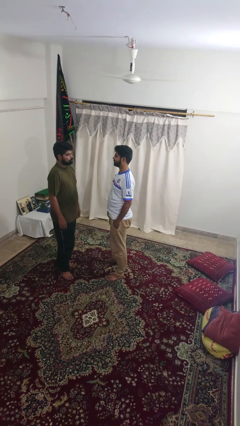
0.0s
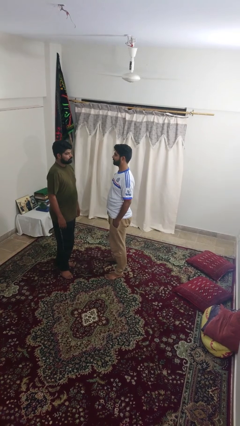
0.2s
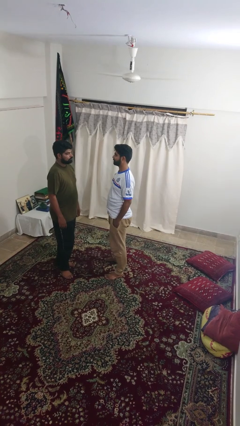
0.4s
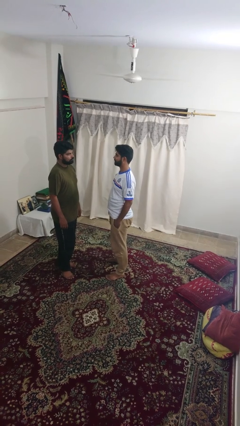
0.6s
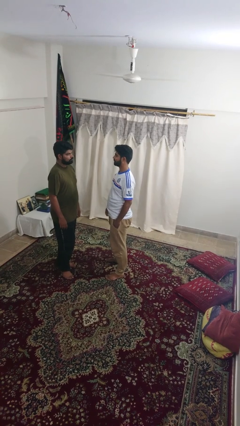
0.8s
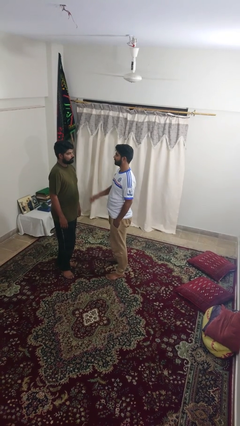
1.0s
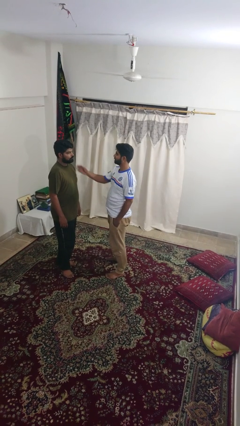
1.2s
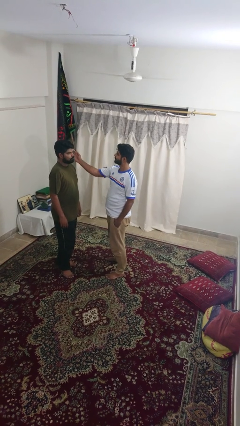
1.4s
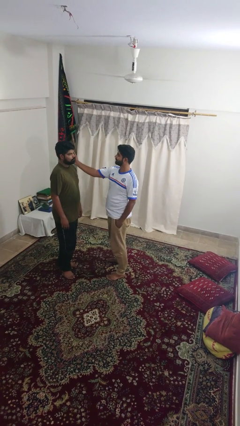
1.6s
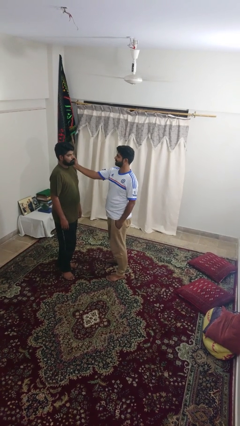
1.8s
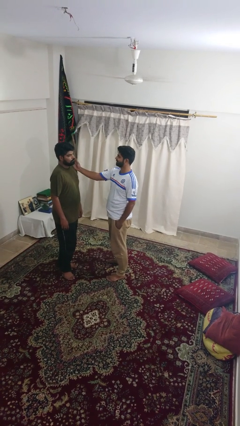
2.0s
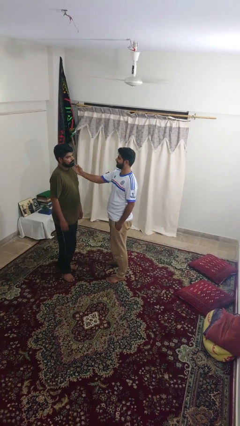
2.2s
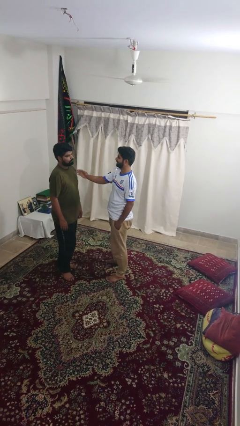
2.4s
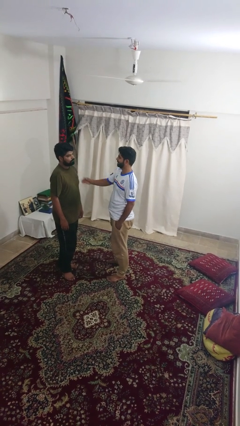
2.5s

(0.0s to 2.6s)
person touches face of person

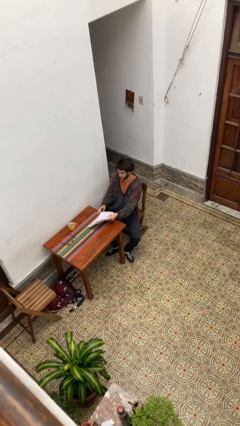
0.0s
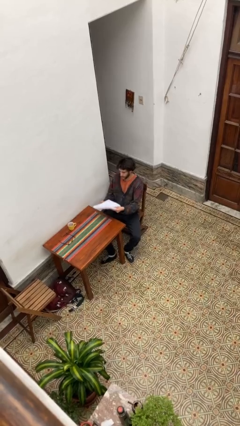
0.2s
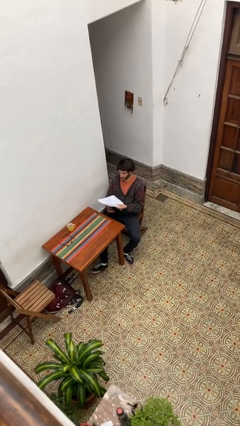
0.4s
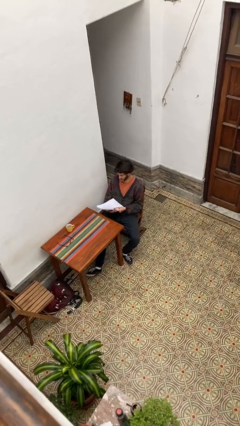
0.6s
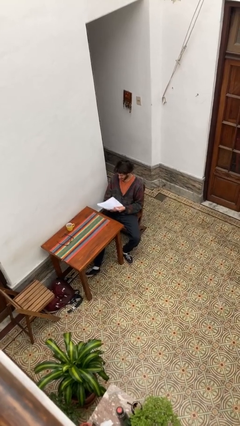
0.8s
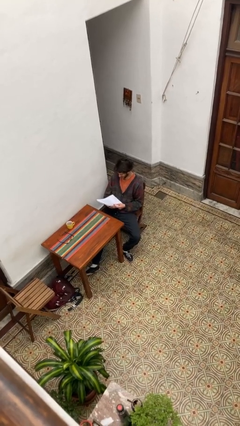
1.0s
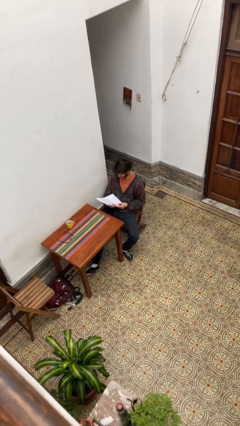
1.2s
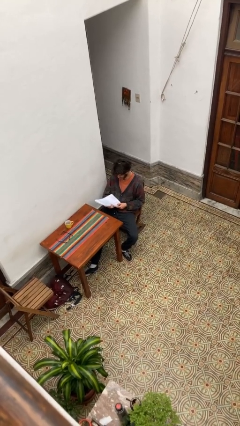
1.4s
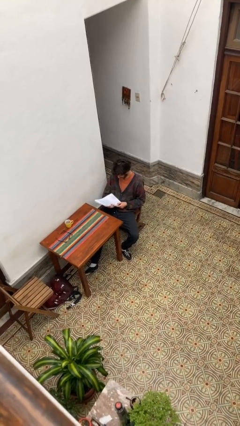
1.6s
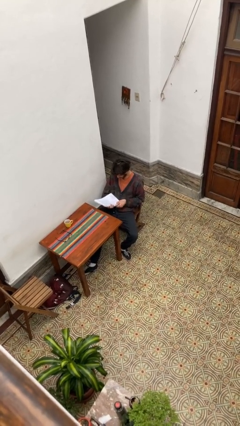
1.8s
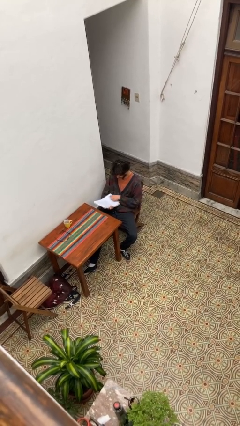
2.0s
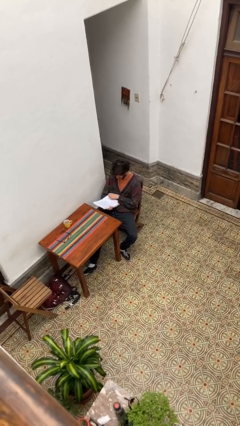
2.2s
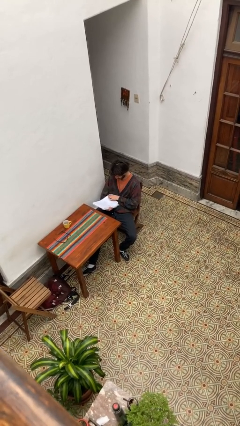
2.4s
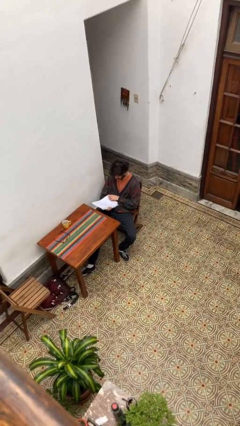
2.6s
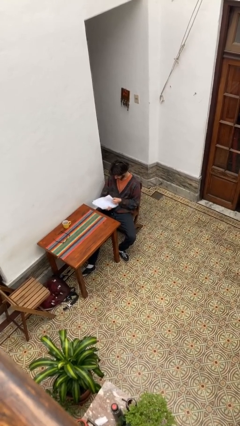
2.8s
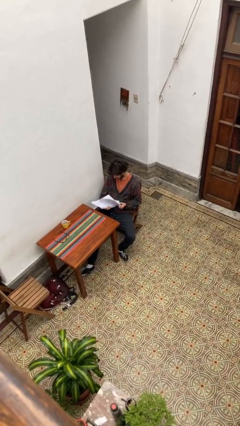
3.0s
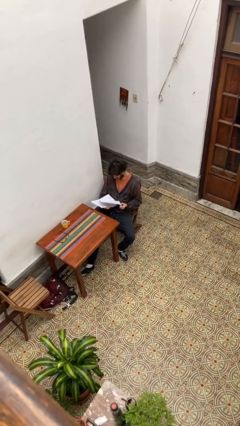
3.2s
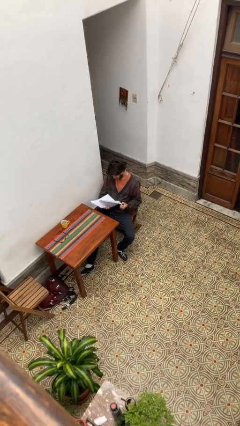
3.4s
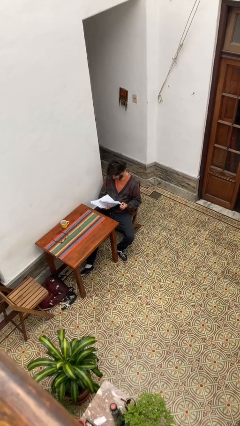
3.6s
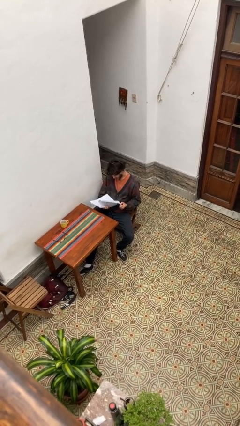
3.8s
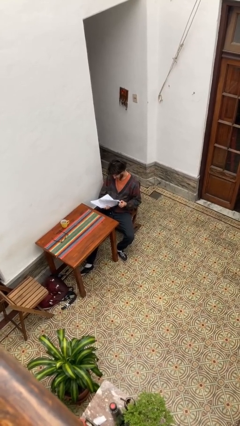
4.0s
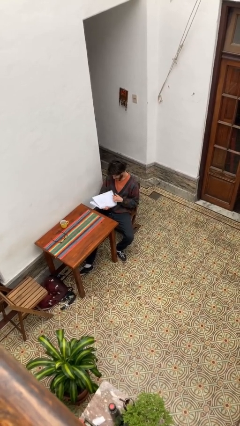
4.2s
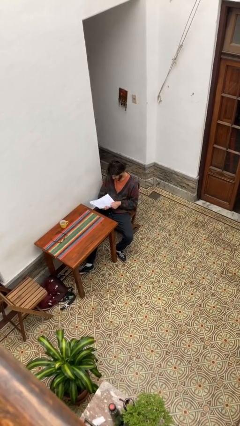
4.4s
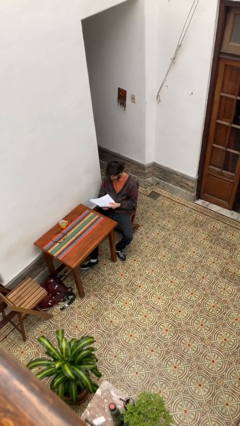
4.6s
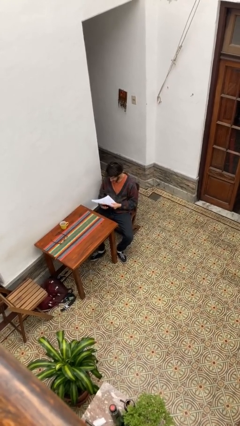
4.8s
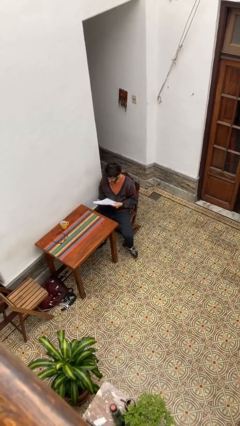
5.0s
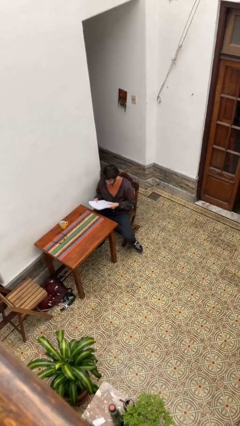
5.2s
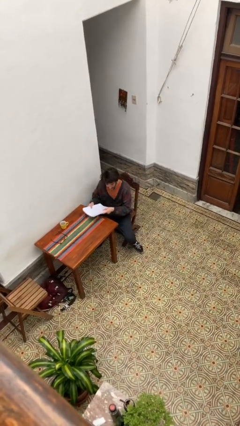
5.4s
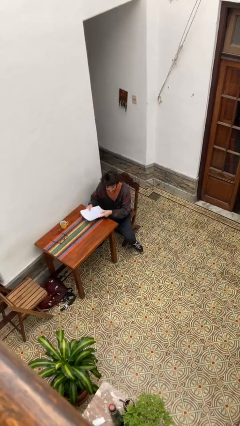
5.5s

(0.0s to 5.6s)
person reads document

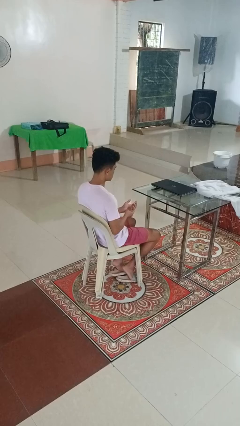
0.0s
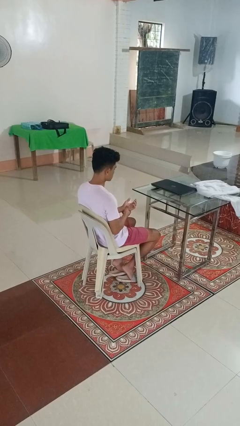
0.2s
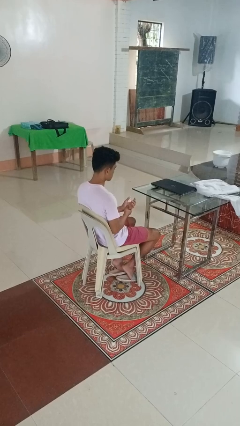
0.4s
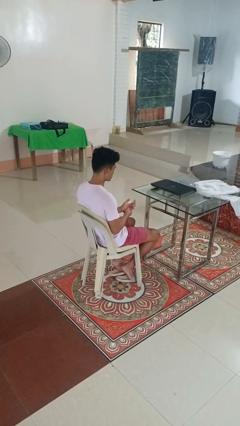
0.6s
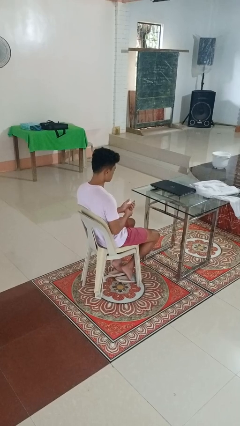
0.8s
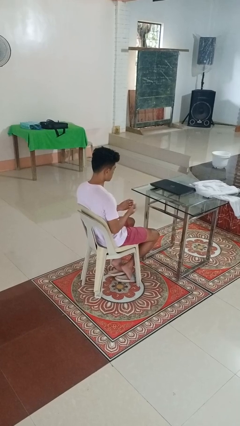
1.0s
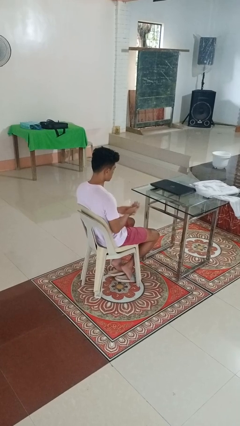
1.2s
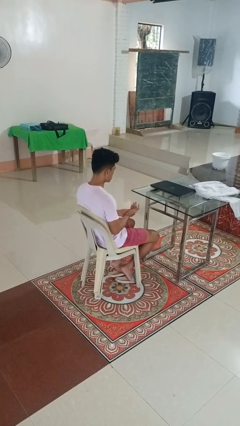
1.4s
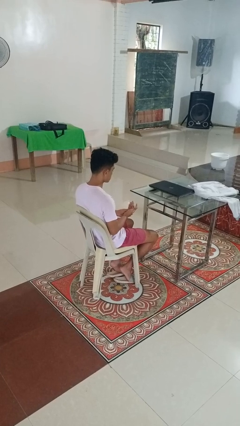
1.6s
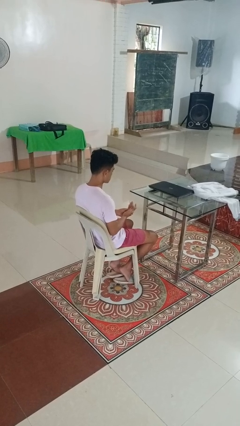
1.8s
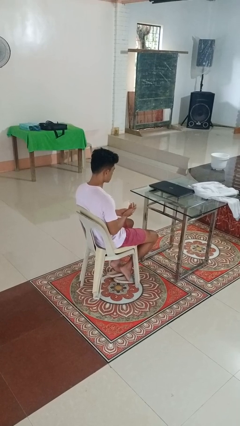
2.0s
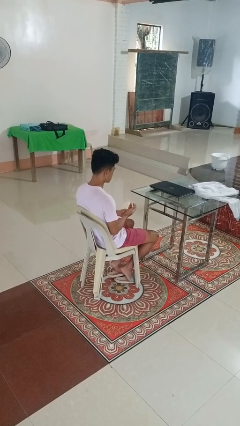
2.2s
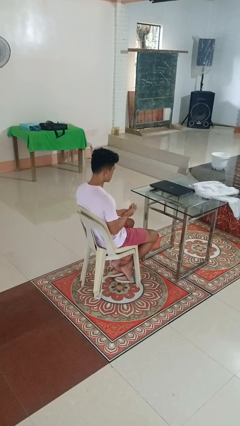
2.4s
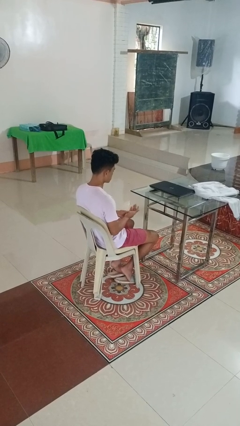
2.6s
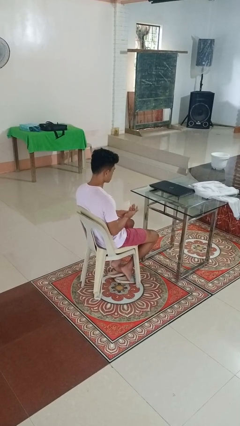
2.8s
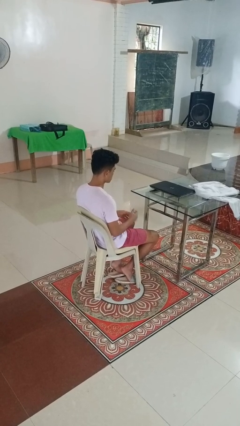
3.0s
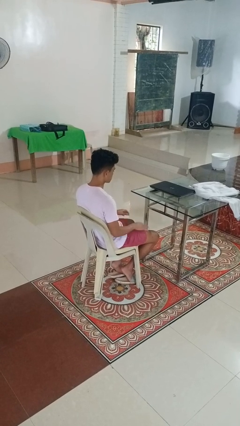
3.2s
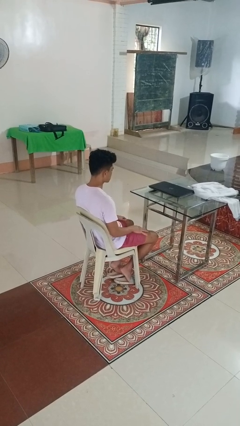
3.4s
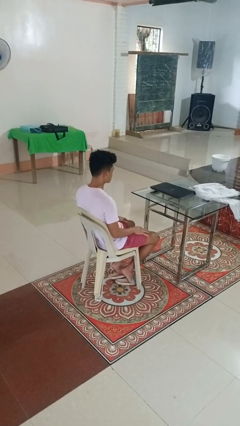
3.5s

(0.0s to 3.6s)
person looks at hands in lap

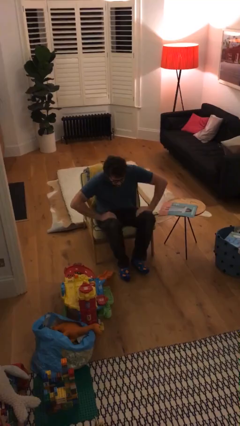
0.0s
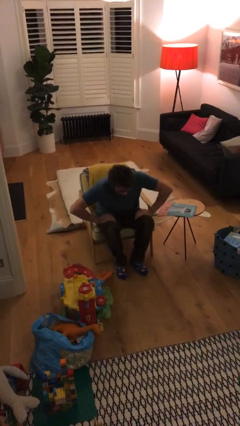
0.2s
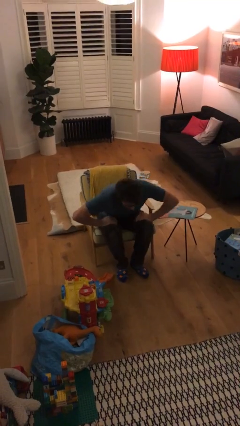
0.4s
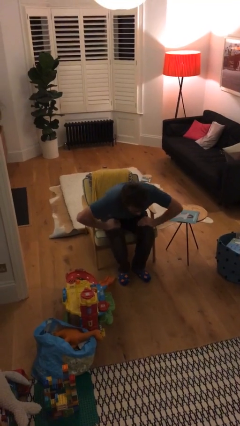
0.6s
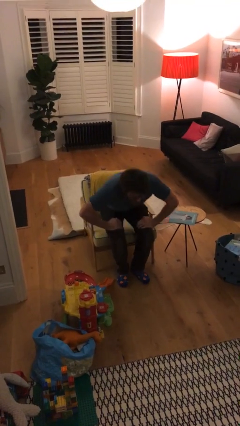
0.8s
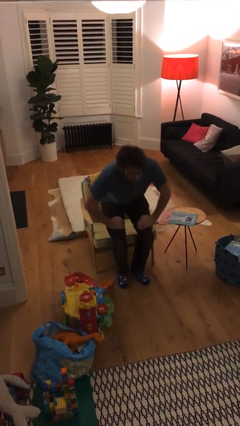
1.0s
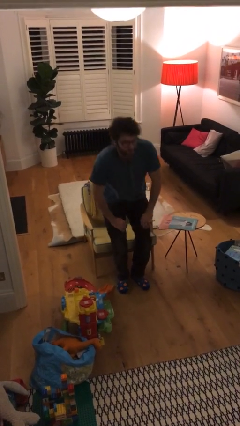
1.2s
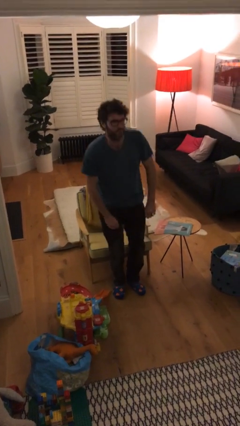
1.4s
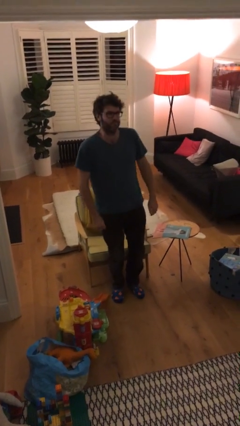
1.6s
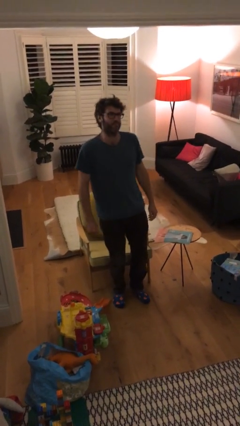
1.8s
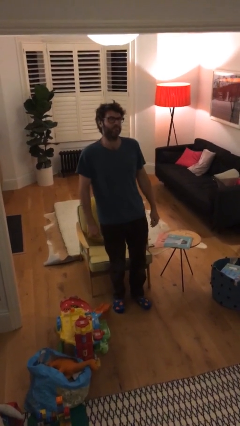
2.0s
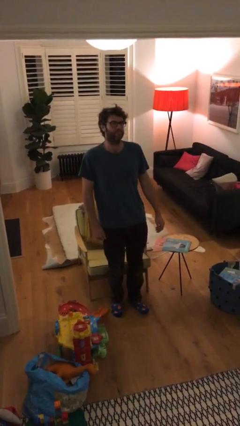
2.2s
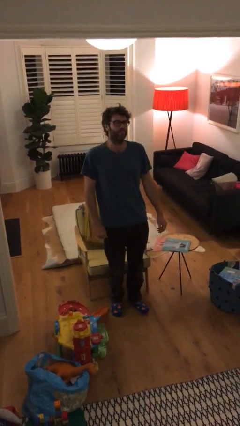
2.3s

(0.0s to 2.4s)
person stands up

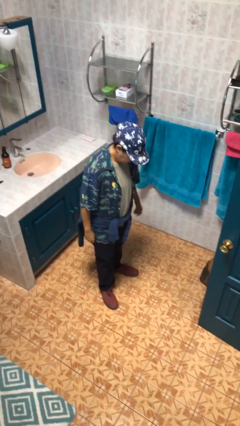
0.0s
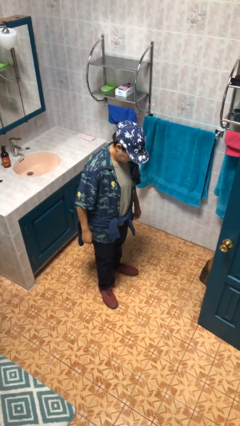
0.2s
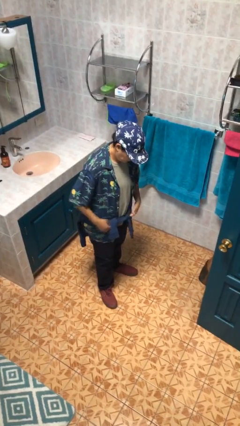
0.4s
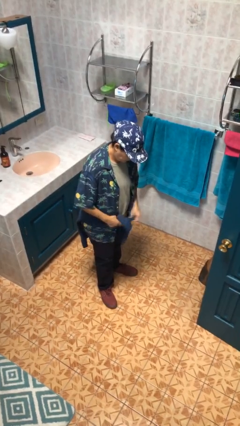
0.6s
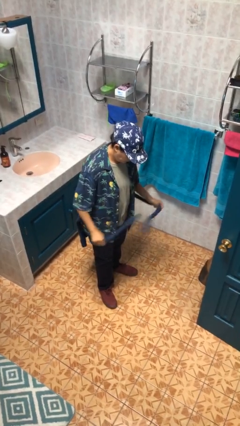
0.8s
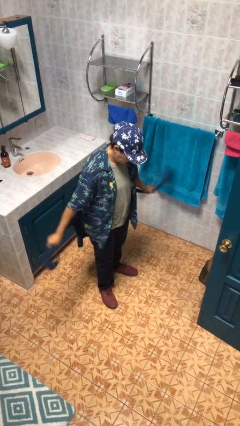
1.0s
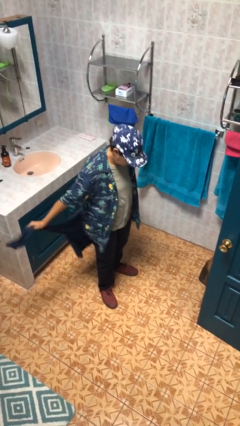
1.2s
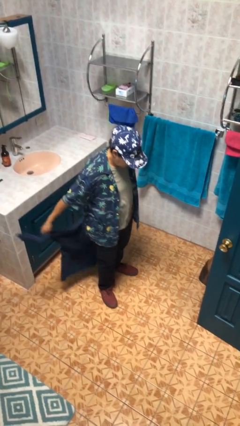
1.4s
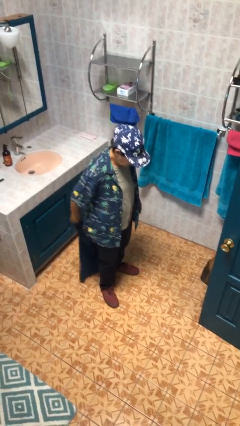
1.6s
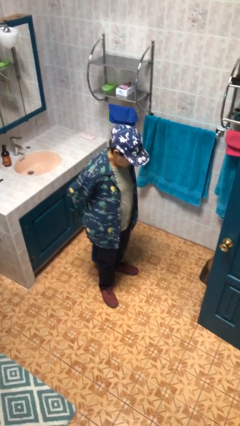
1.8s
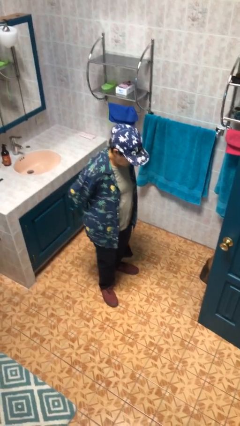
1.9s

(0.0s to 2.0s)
person unties jacket around waist

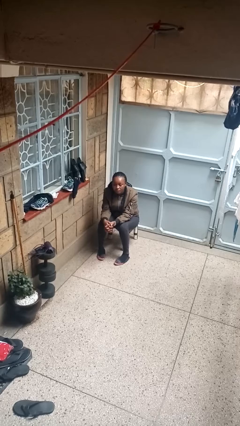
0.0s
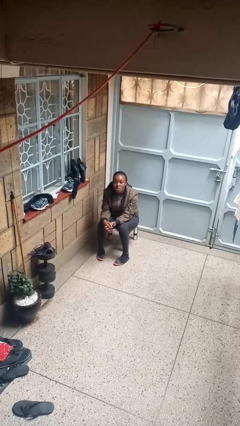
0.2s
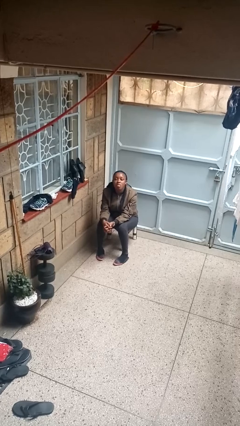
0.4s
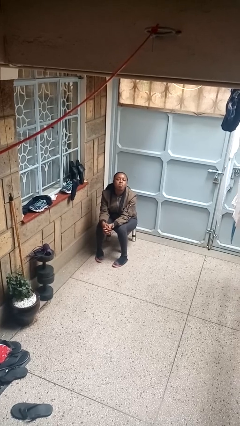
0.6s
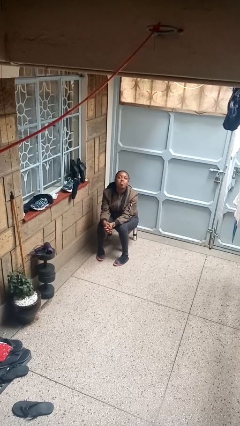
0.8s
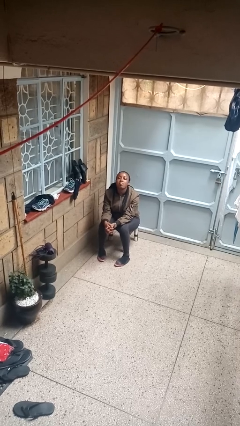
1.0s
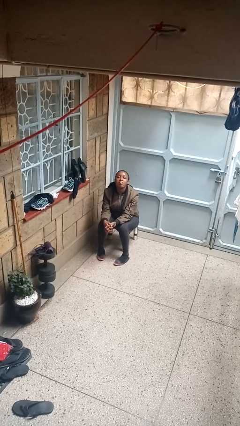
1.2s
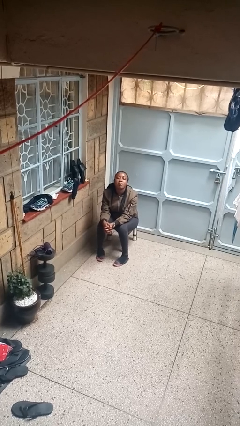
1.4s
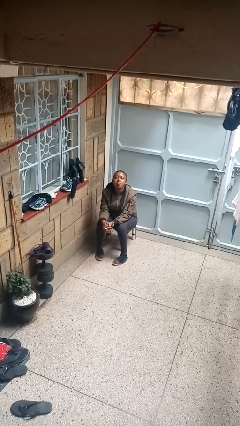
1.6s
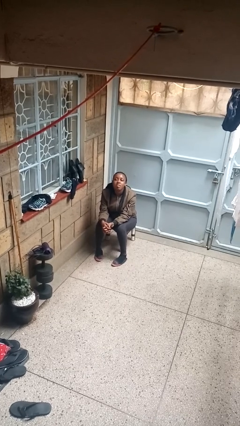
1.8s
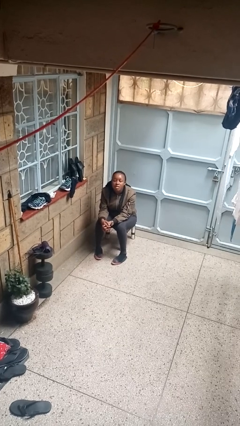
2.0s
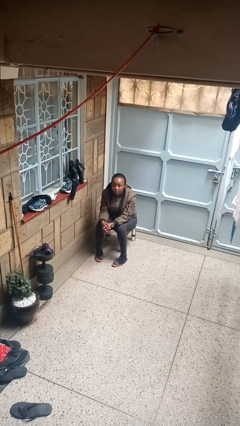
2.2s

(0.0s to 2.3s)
person sticks out tongue
